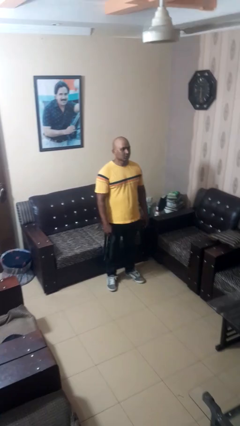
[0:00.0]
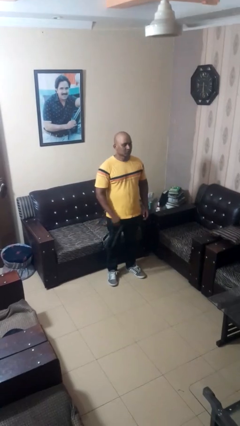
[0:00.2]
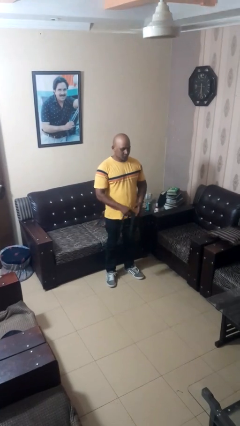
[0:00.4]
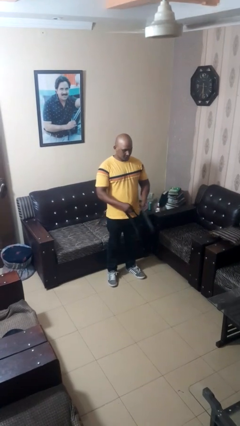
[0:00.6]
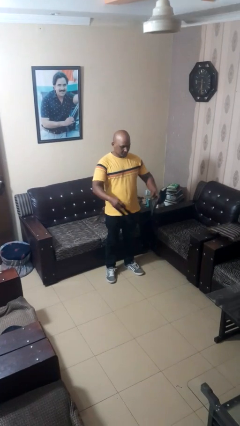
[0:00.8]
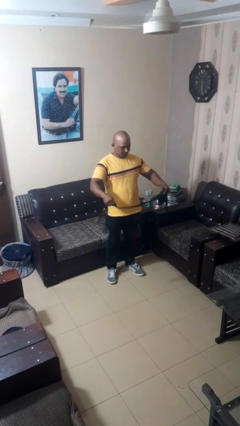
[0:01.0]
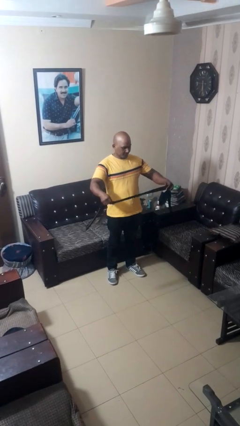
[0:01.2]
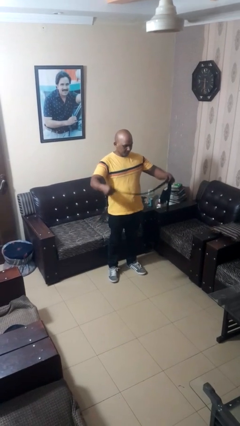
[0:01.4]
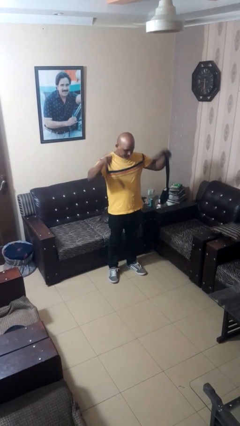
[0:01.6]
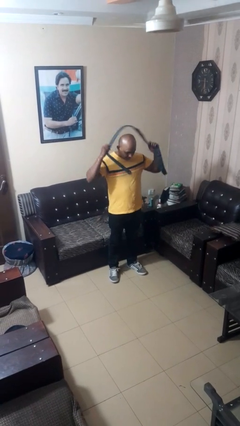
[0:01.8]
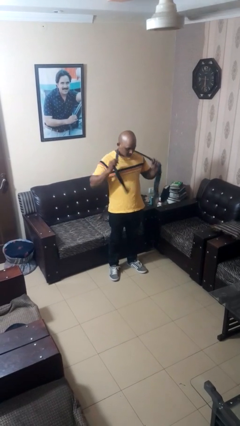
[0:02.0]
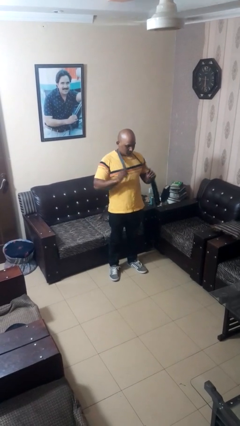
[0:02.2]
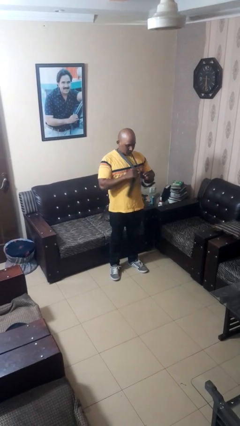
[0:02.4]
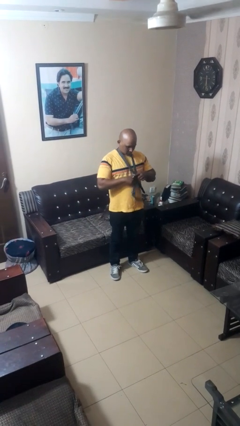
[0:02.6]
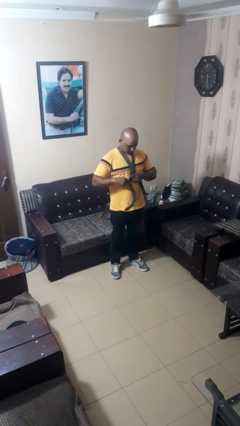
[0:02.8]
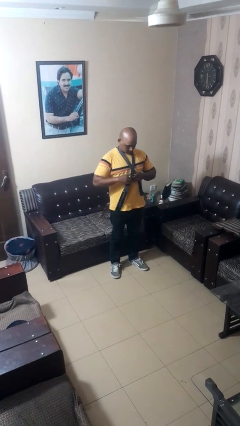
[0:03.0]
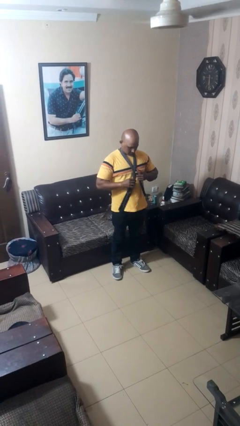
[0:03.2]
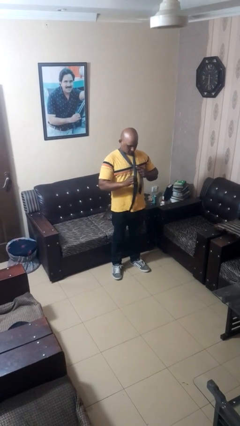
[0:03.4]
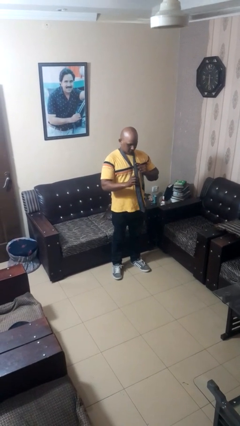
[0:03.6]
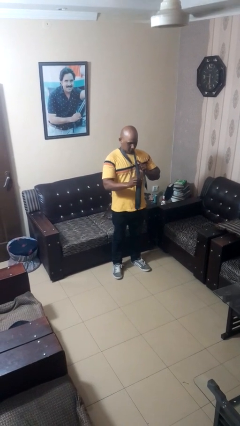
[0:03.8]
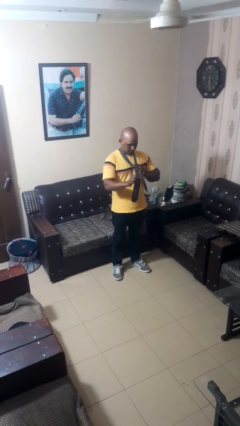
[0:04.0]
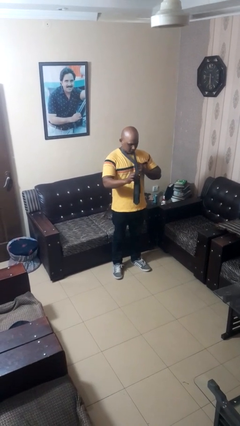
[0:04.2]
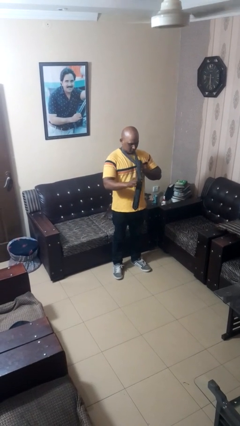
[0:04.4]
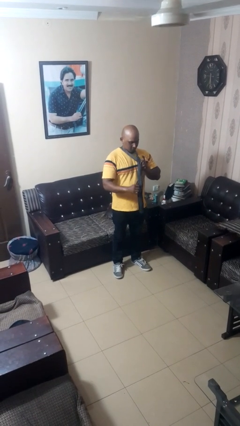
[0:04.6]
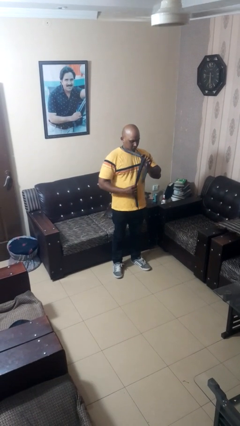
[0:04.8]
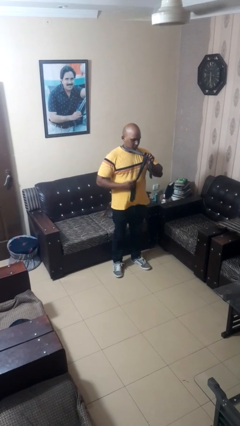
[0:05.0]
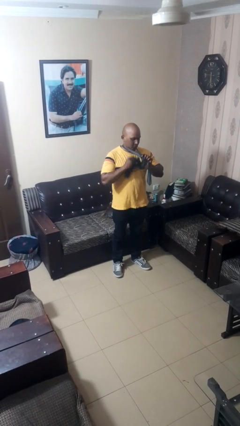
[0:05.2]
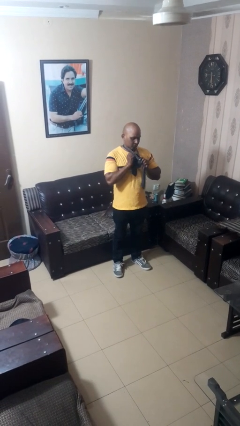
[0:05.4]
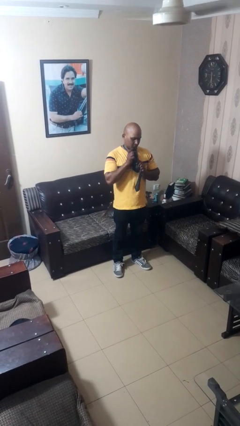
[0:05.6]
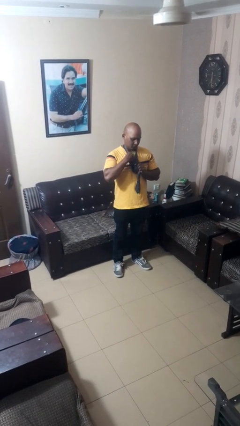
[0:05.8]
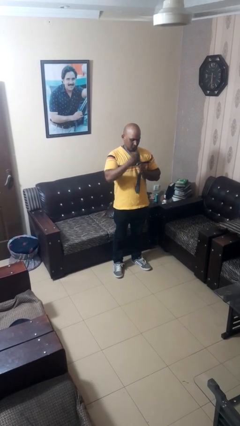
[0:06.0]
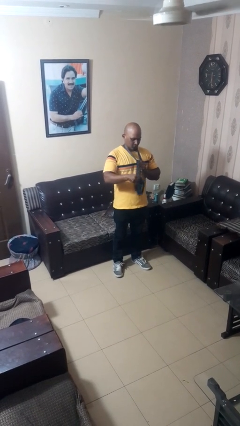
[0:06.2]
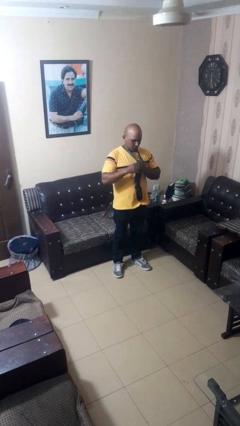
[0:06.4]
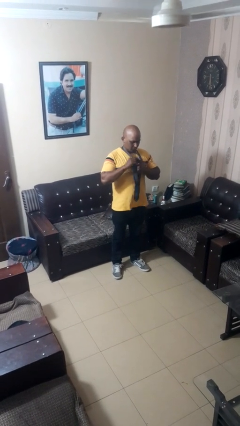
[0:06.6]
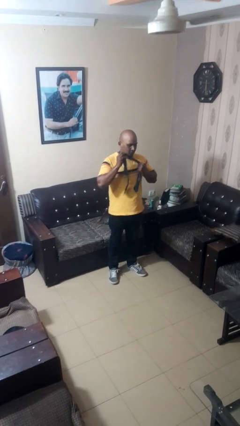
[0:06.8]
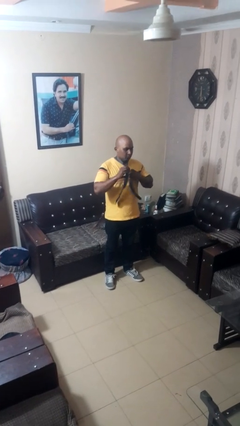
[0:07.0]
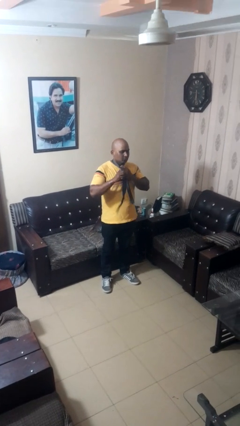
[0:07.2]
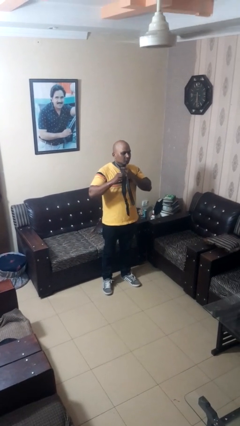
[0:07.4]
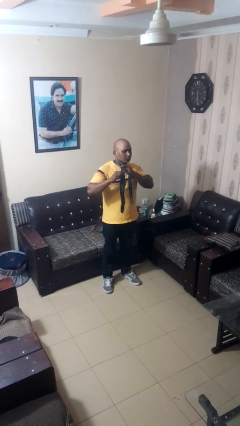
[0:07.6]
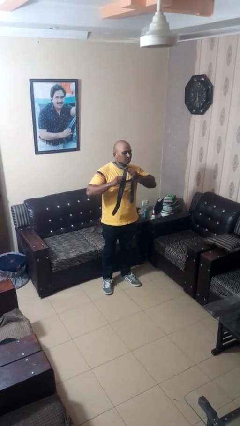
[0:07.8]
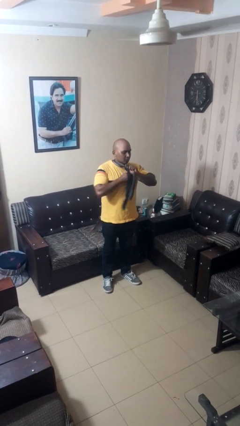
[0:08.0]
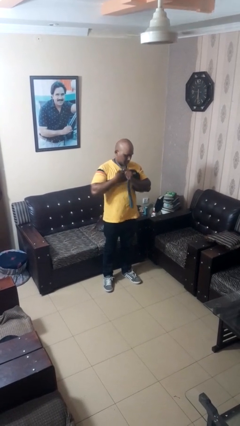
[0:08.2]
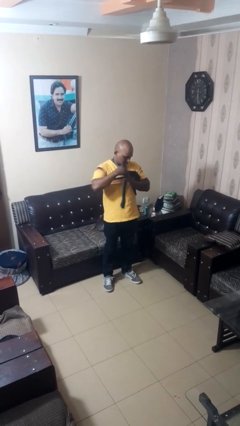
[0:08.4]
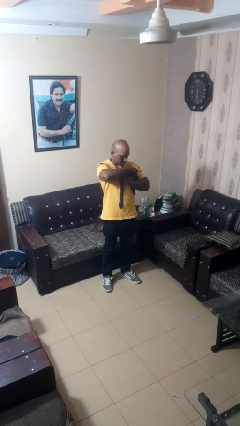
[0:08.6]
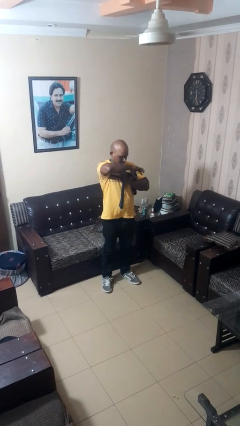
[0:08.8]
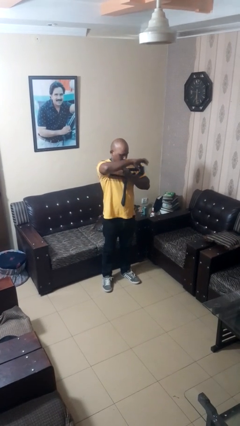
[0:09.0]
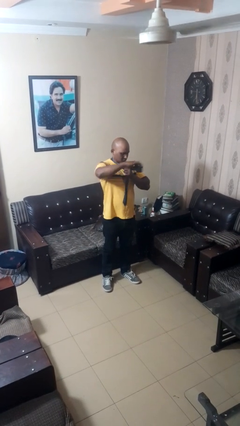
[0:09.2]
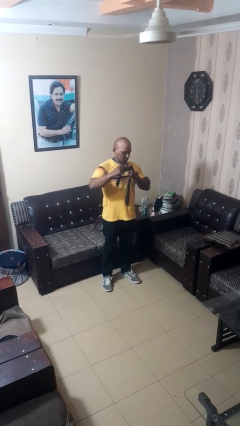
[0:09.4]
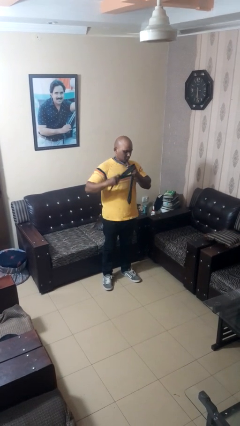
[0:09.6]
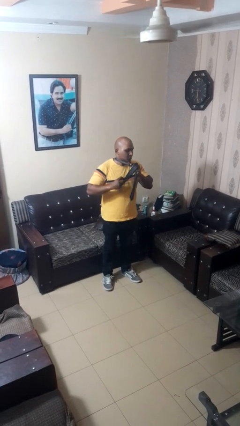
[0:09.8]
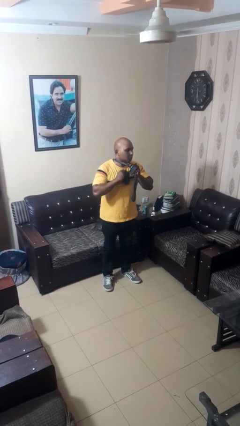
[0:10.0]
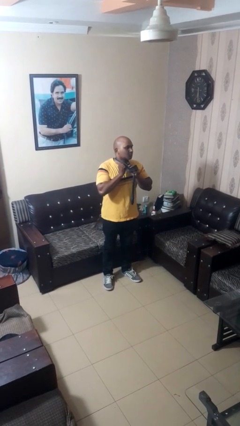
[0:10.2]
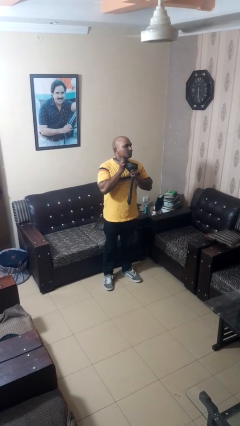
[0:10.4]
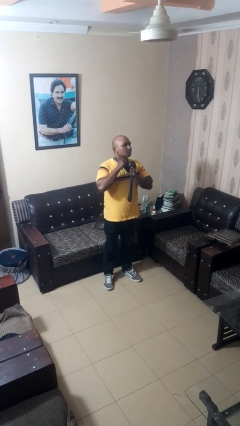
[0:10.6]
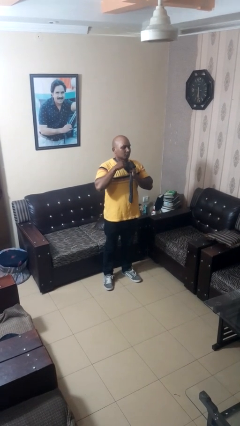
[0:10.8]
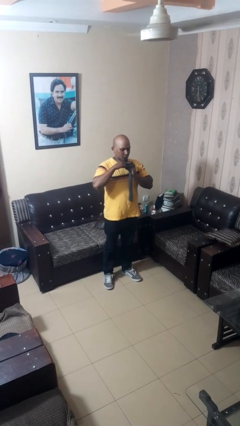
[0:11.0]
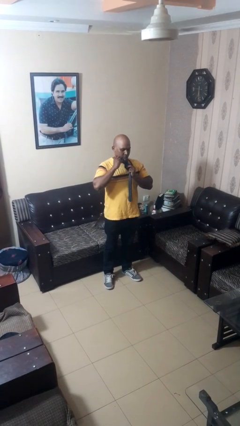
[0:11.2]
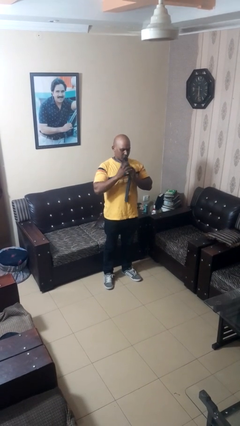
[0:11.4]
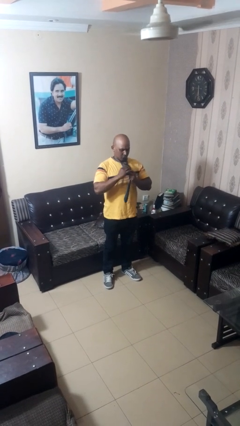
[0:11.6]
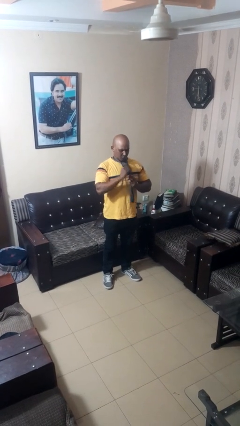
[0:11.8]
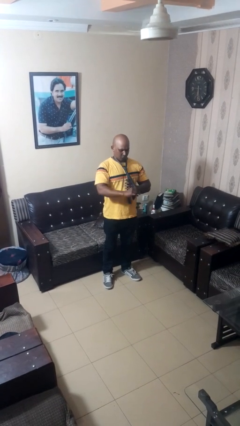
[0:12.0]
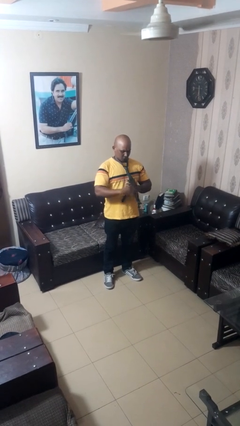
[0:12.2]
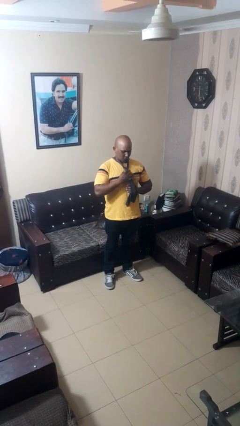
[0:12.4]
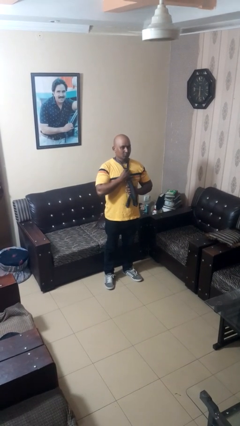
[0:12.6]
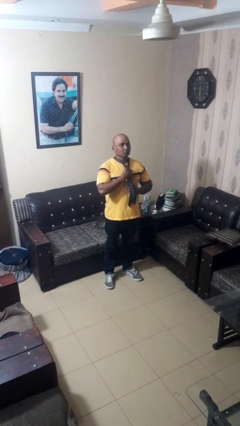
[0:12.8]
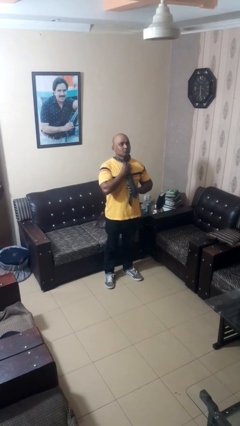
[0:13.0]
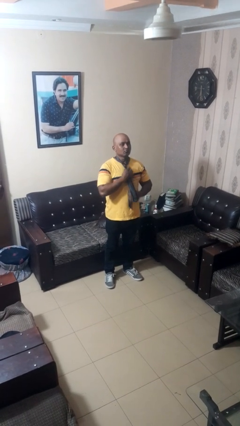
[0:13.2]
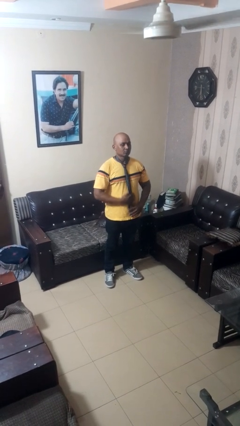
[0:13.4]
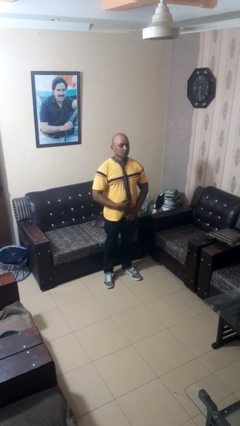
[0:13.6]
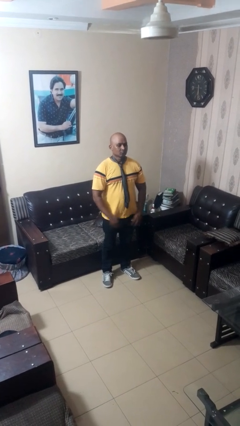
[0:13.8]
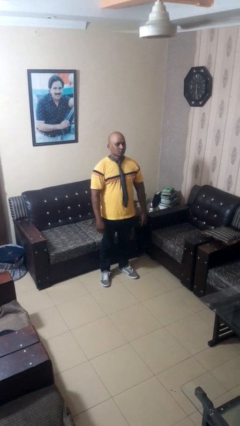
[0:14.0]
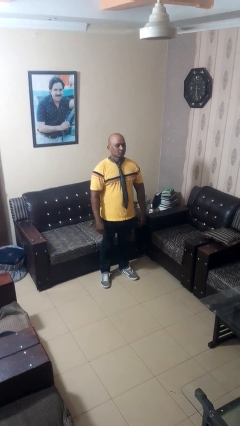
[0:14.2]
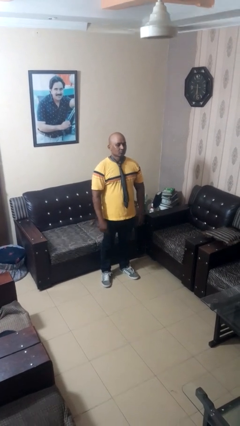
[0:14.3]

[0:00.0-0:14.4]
person puts on necktie

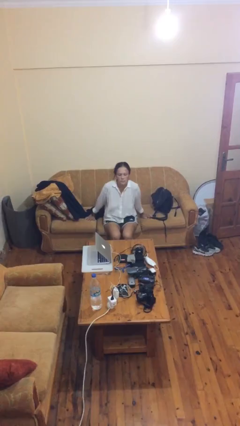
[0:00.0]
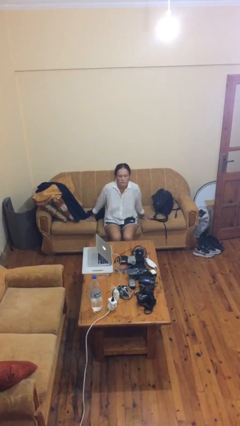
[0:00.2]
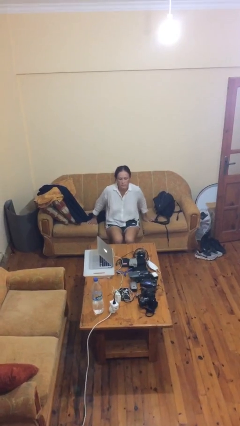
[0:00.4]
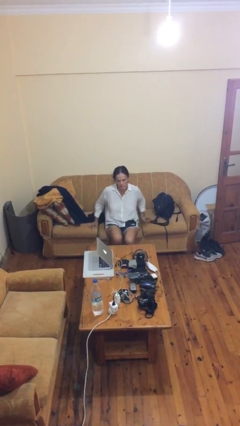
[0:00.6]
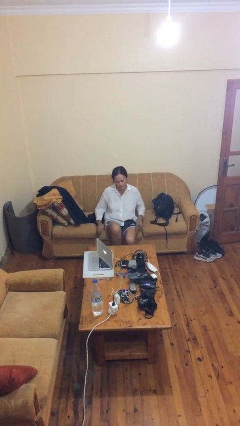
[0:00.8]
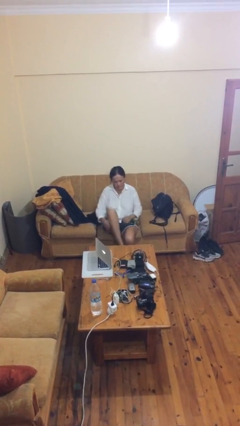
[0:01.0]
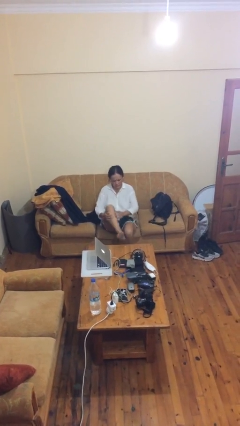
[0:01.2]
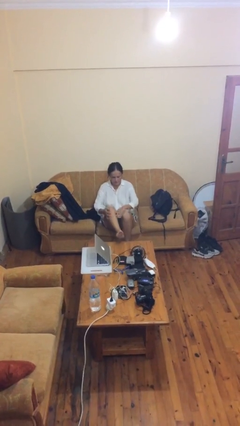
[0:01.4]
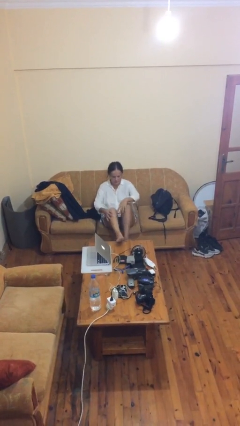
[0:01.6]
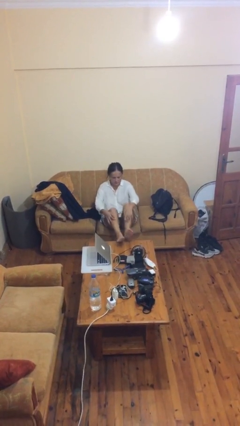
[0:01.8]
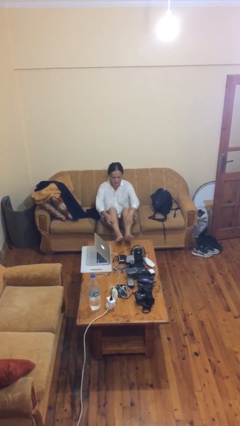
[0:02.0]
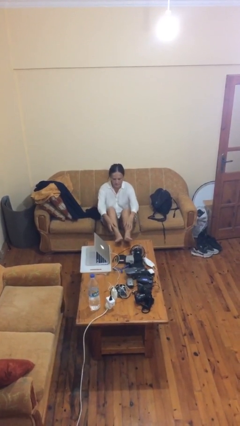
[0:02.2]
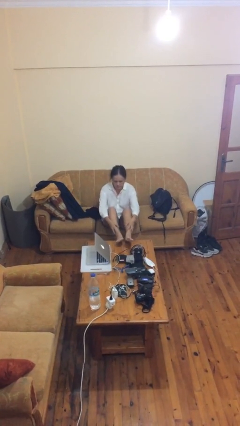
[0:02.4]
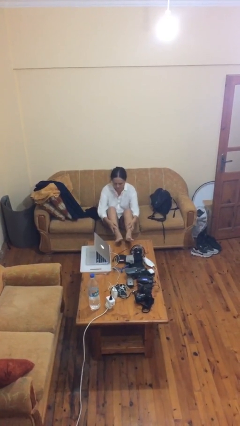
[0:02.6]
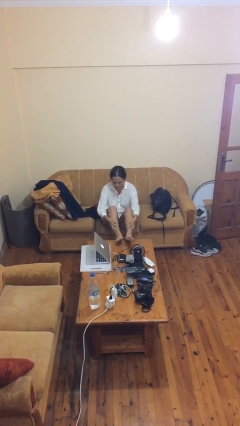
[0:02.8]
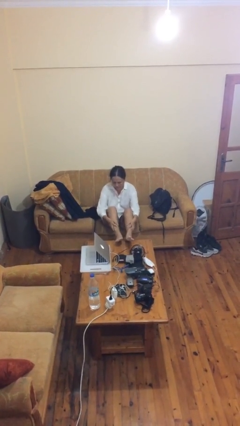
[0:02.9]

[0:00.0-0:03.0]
person puts feet up

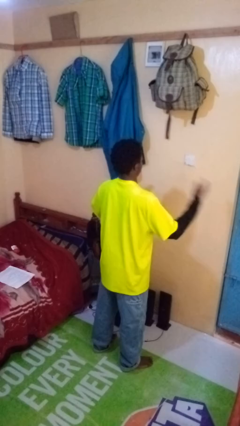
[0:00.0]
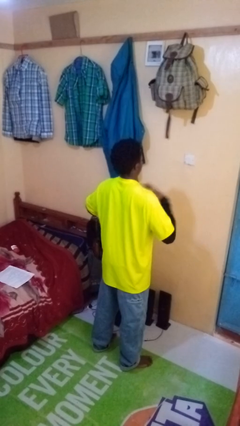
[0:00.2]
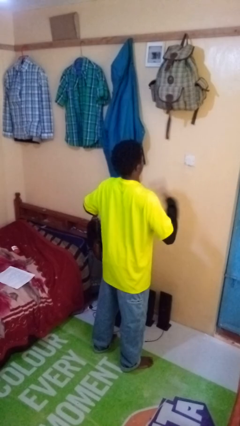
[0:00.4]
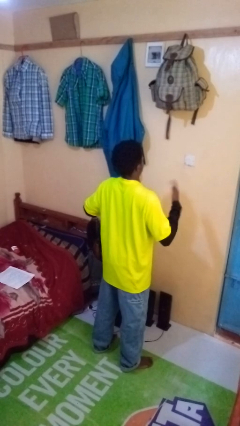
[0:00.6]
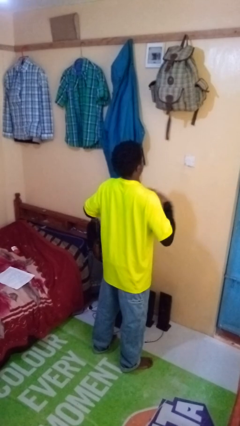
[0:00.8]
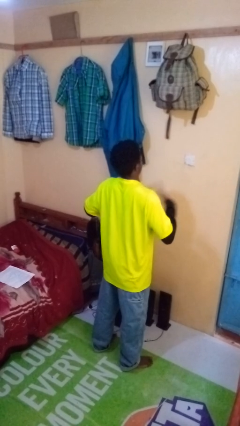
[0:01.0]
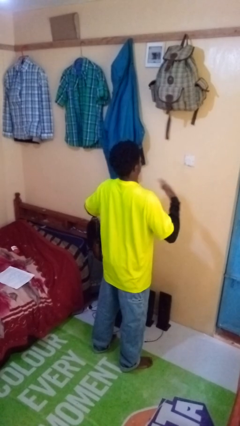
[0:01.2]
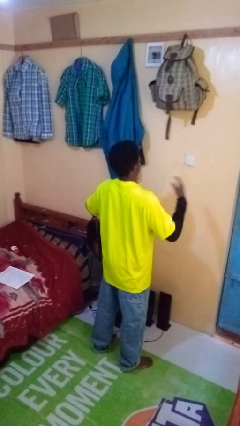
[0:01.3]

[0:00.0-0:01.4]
person drums on chest
